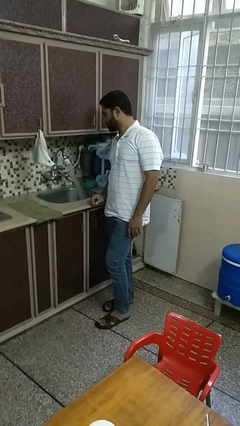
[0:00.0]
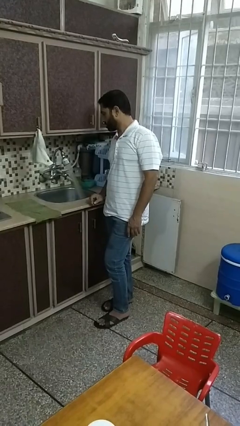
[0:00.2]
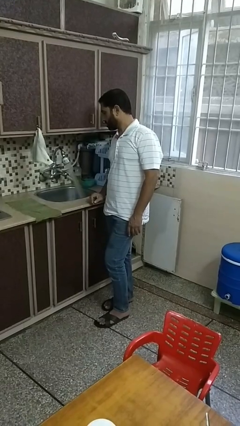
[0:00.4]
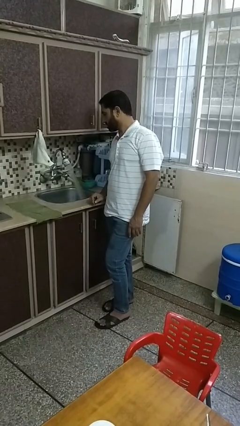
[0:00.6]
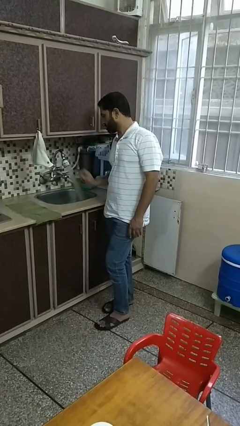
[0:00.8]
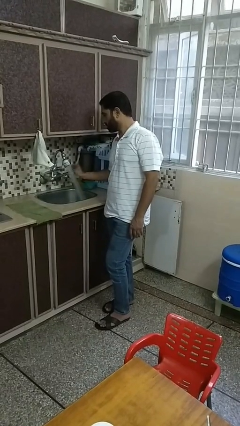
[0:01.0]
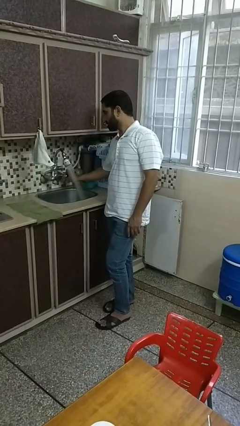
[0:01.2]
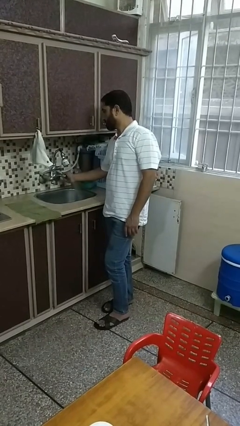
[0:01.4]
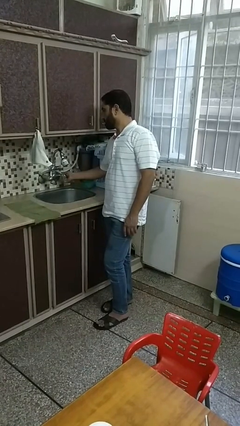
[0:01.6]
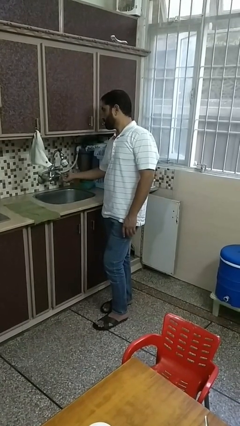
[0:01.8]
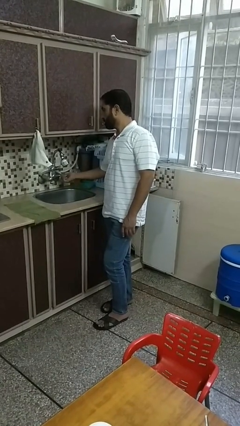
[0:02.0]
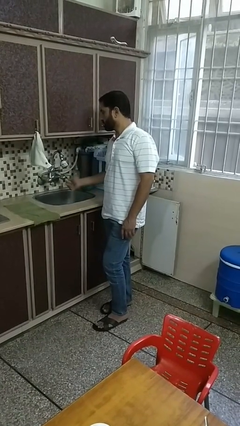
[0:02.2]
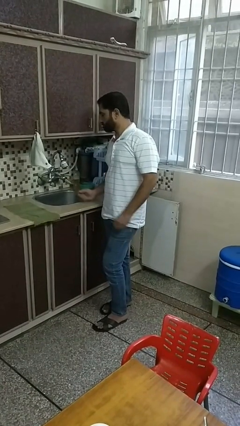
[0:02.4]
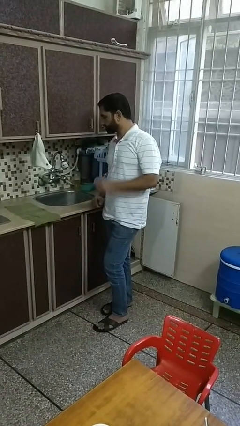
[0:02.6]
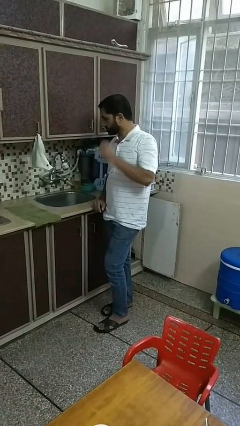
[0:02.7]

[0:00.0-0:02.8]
person turns off faucet

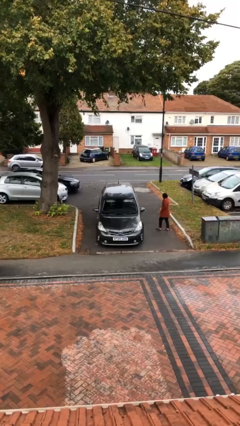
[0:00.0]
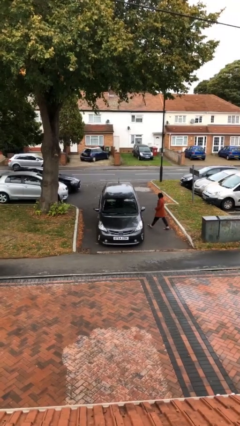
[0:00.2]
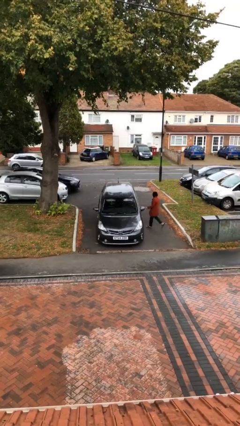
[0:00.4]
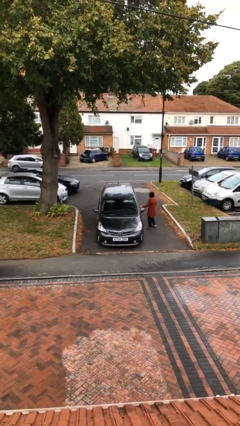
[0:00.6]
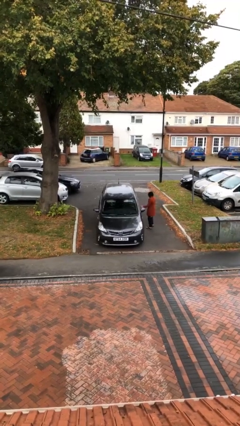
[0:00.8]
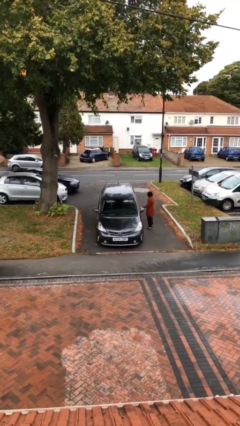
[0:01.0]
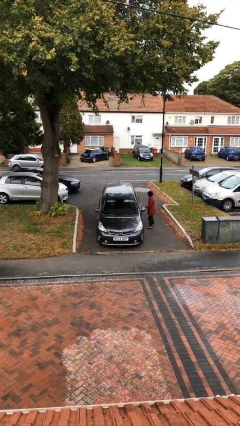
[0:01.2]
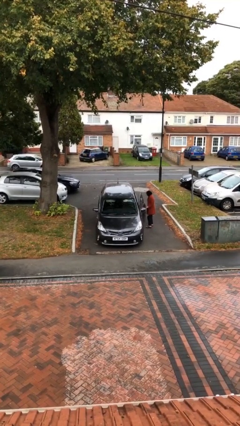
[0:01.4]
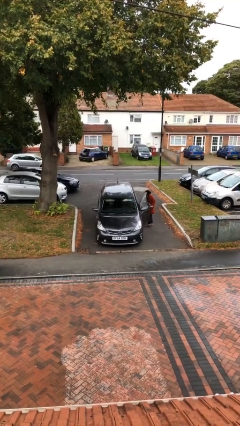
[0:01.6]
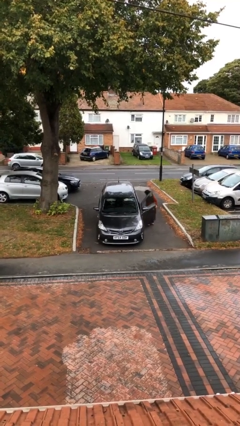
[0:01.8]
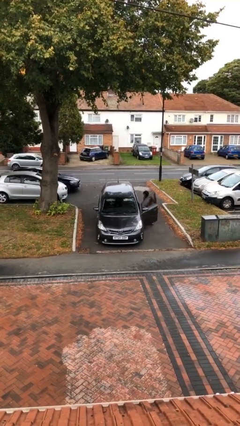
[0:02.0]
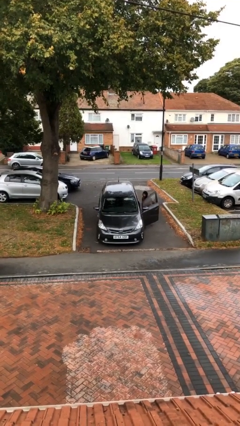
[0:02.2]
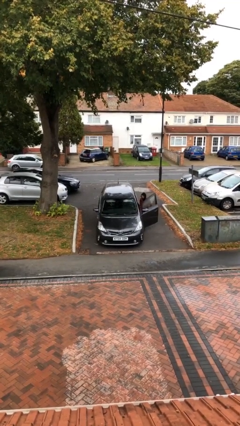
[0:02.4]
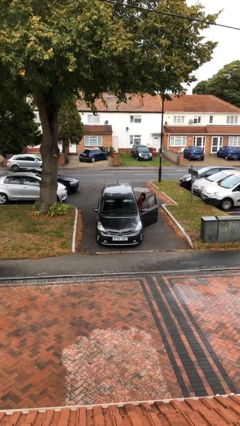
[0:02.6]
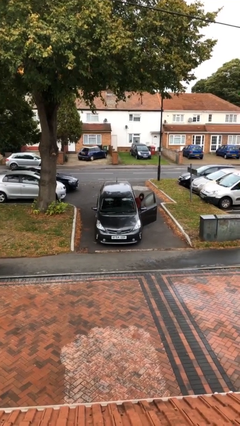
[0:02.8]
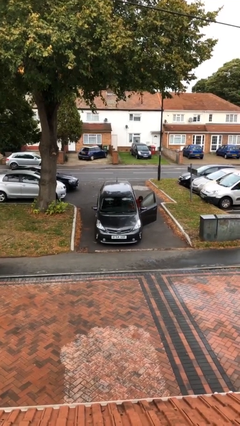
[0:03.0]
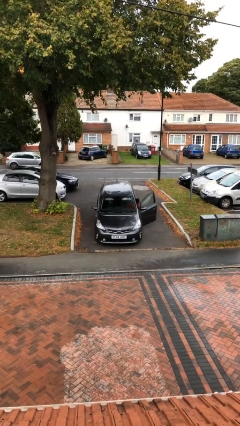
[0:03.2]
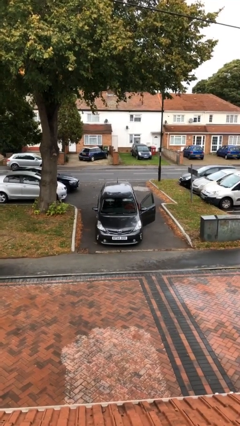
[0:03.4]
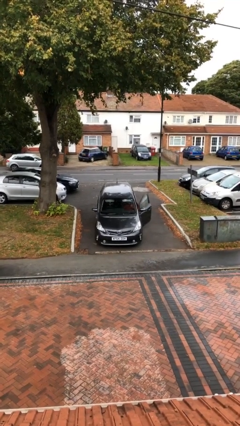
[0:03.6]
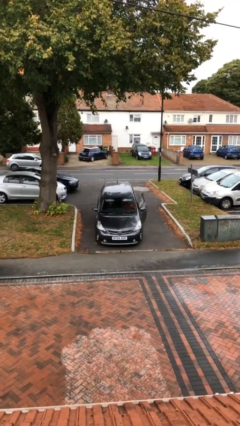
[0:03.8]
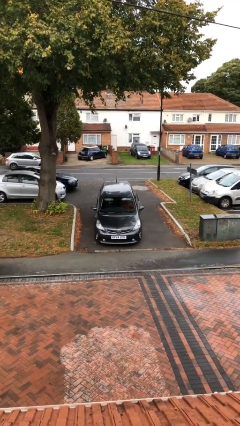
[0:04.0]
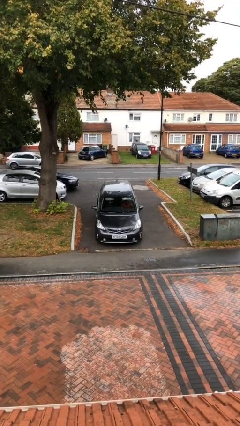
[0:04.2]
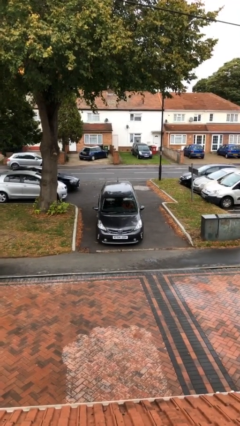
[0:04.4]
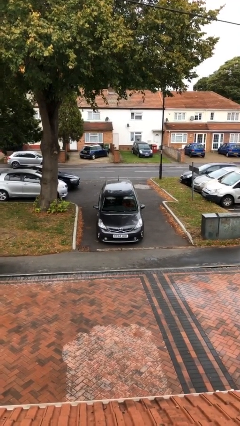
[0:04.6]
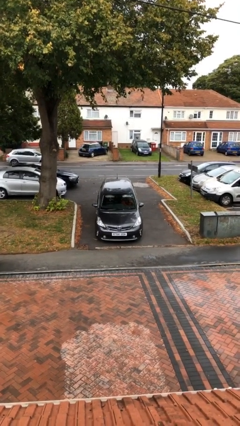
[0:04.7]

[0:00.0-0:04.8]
car picks up person

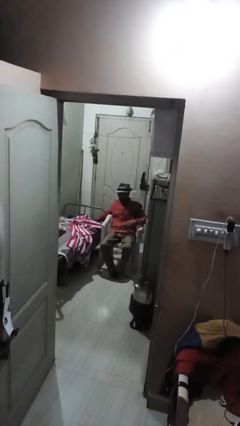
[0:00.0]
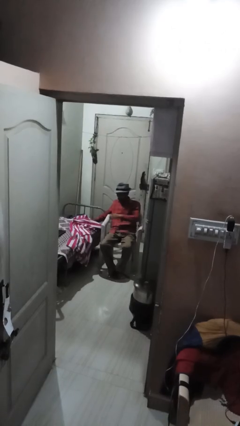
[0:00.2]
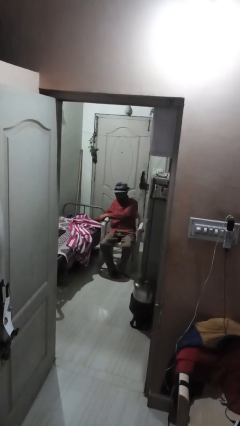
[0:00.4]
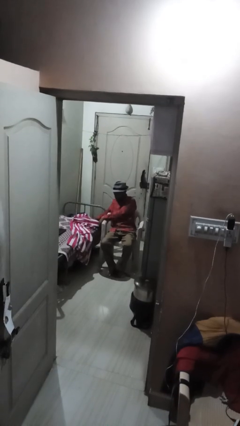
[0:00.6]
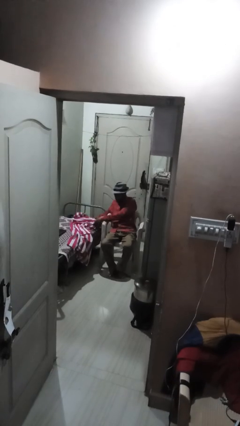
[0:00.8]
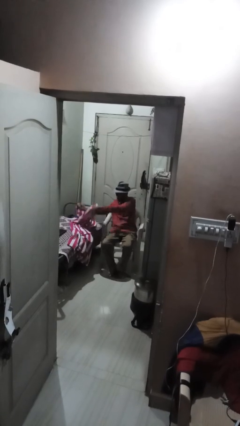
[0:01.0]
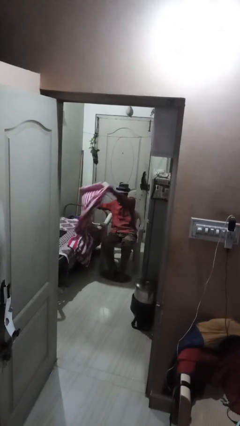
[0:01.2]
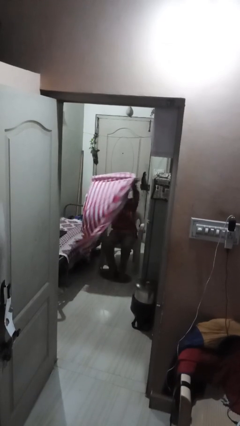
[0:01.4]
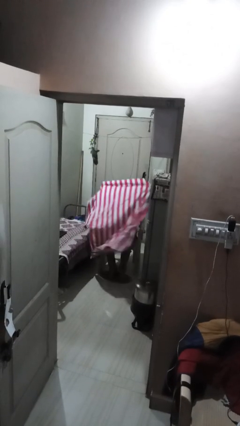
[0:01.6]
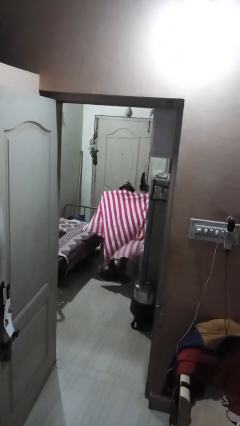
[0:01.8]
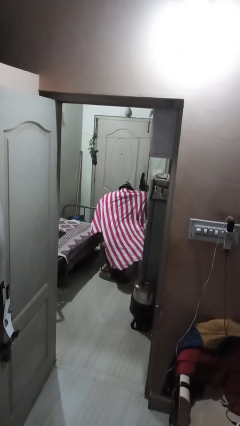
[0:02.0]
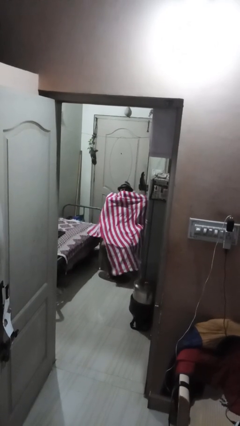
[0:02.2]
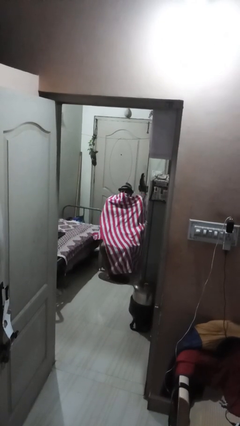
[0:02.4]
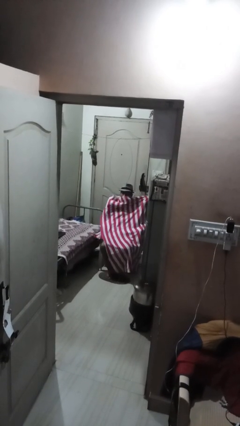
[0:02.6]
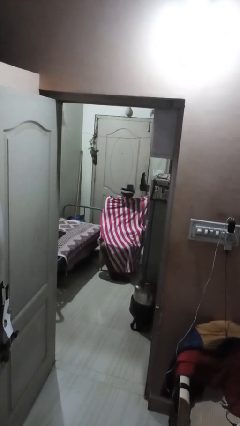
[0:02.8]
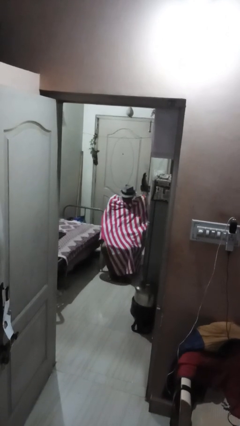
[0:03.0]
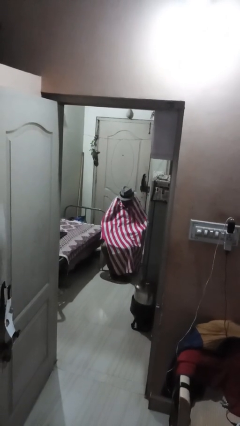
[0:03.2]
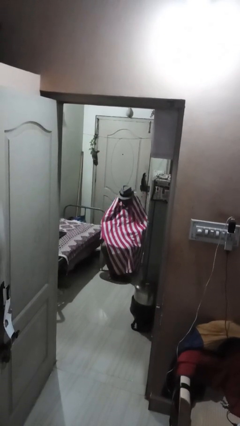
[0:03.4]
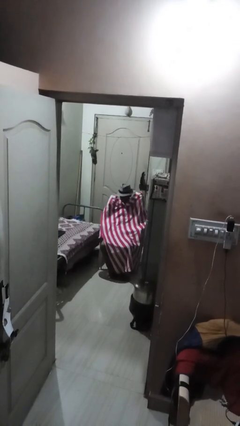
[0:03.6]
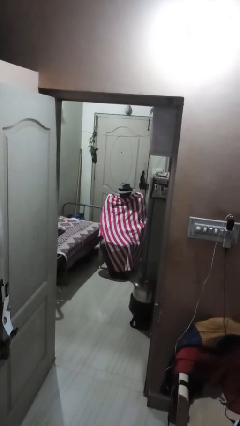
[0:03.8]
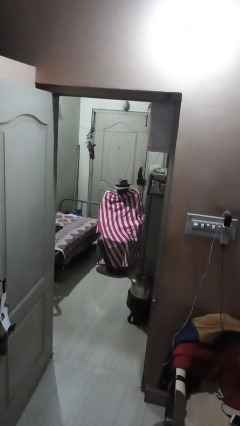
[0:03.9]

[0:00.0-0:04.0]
person covers with blanket

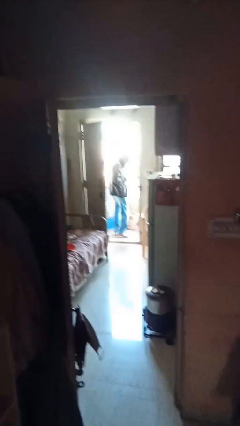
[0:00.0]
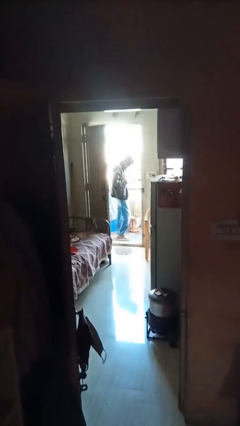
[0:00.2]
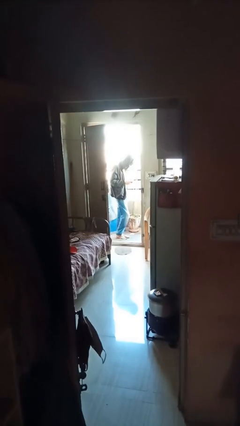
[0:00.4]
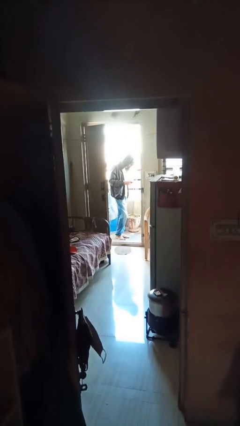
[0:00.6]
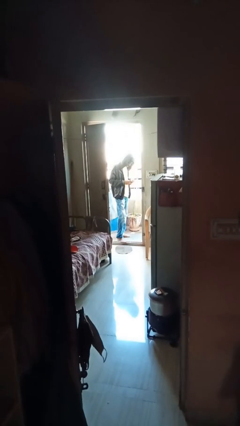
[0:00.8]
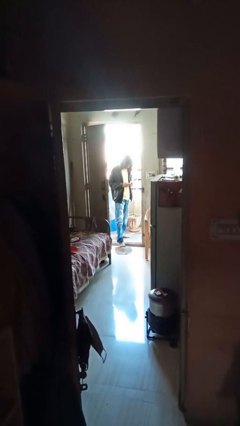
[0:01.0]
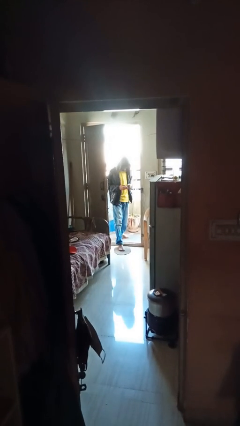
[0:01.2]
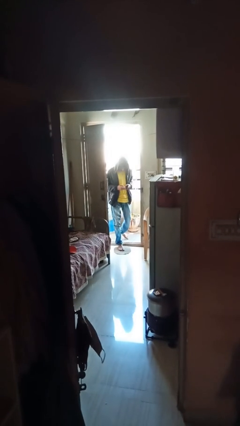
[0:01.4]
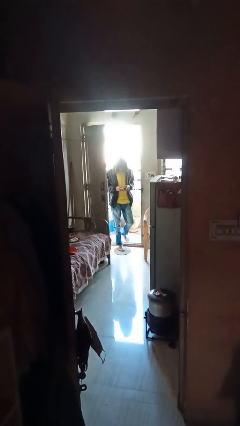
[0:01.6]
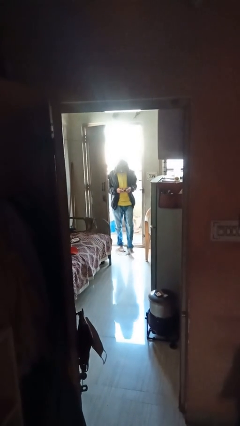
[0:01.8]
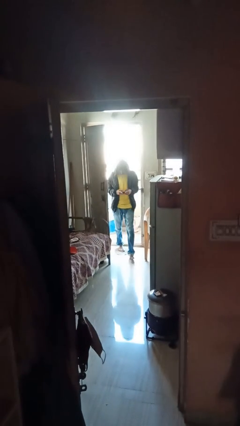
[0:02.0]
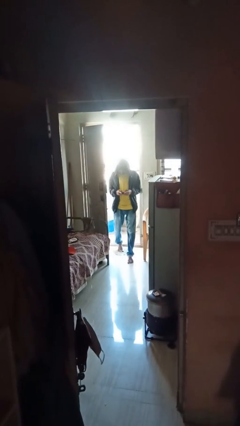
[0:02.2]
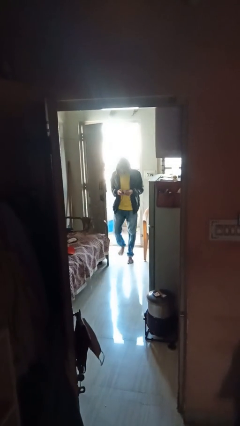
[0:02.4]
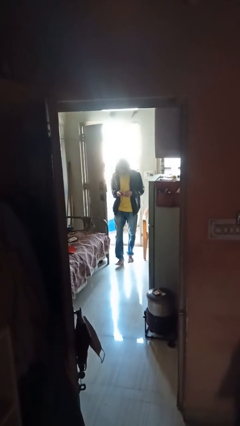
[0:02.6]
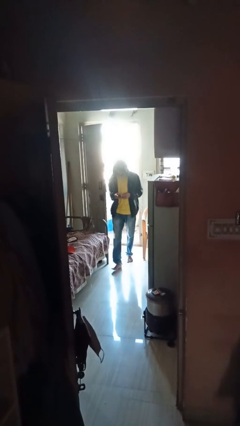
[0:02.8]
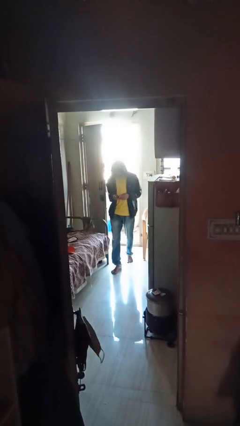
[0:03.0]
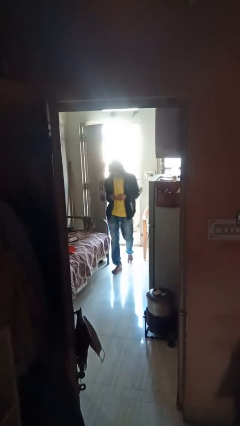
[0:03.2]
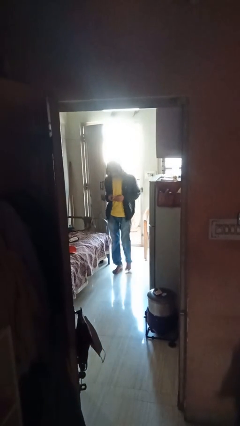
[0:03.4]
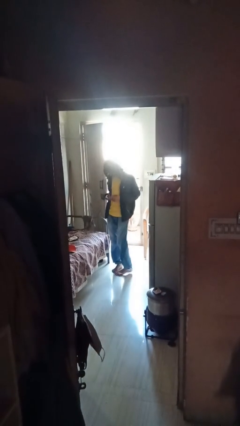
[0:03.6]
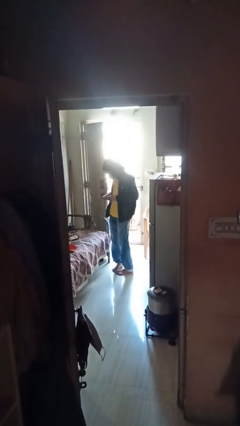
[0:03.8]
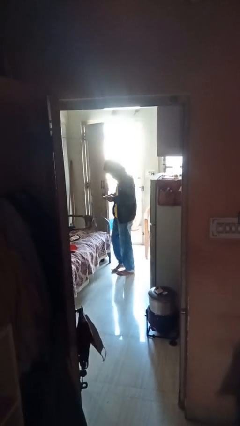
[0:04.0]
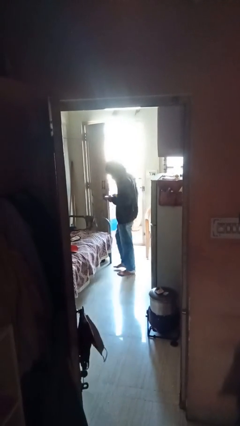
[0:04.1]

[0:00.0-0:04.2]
person enters scene through structure

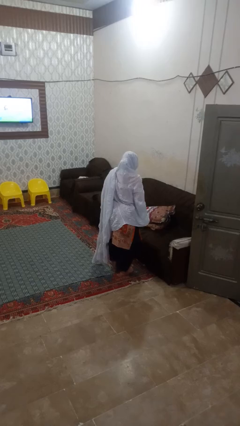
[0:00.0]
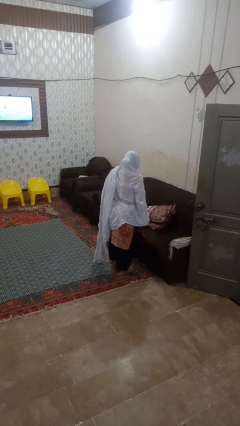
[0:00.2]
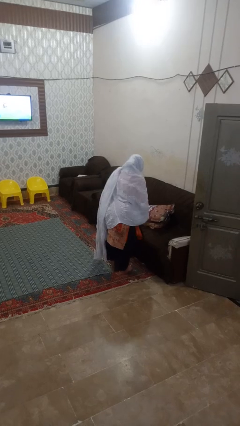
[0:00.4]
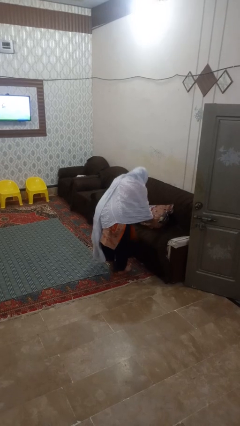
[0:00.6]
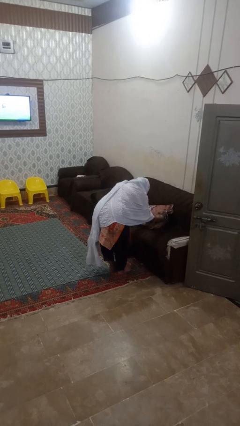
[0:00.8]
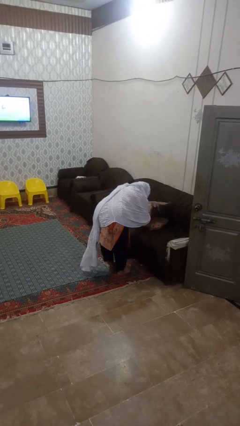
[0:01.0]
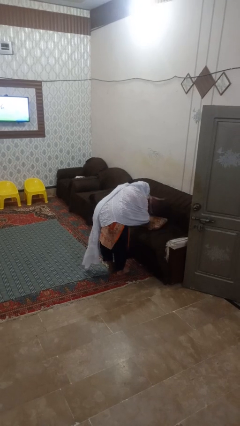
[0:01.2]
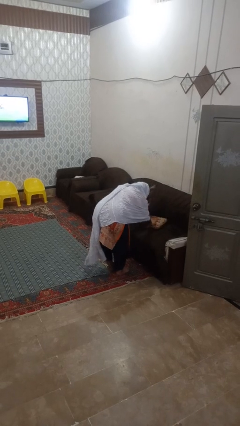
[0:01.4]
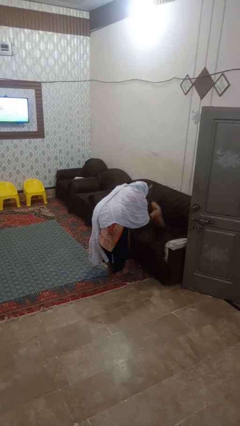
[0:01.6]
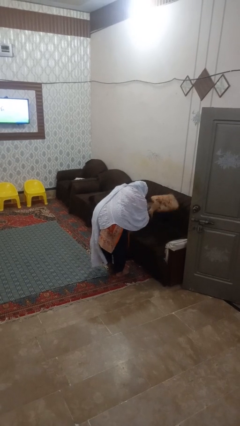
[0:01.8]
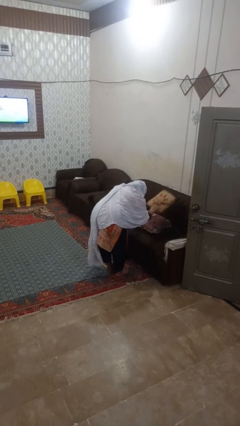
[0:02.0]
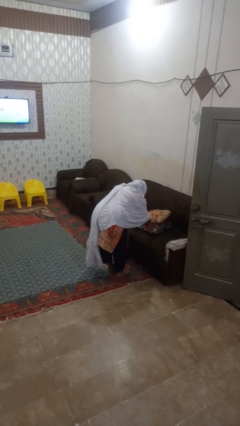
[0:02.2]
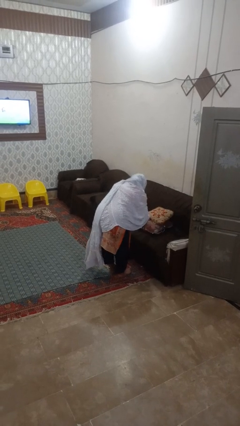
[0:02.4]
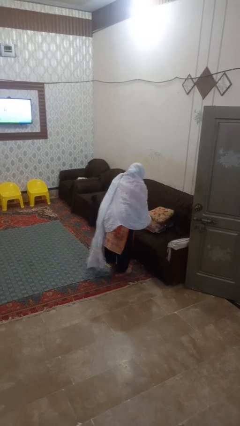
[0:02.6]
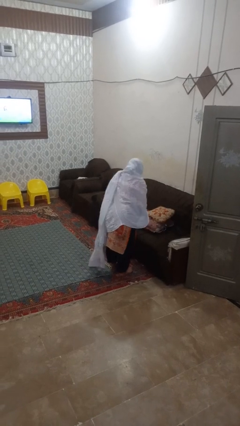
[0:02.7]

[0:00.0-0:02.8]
person searches in couch
